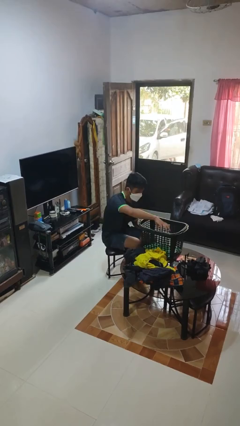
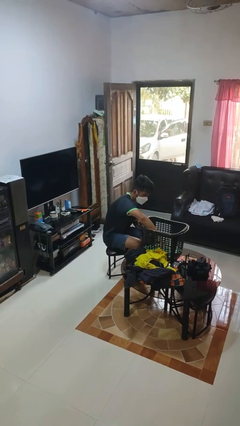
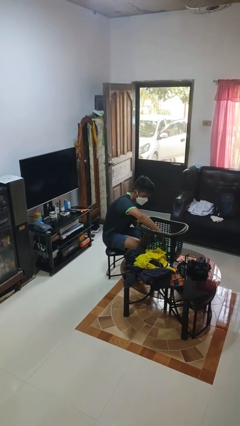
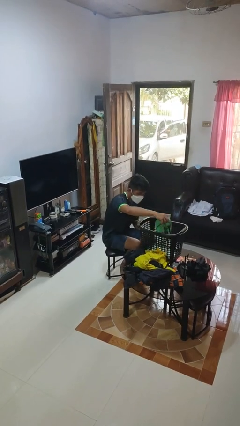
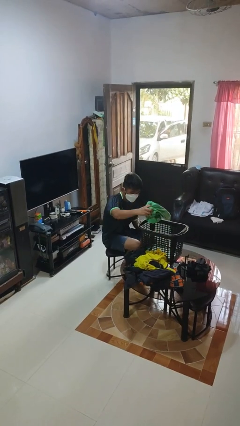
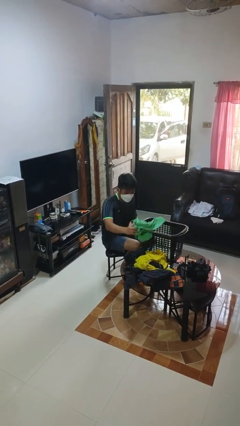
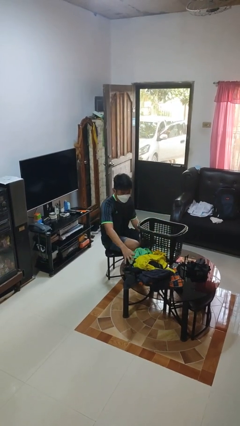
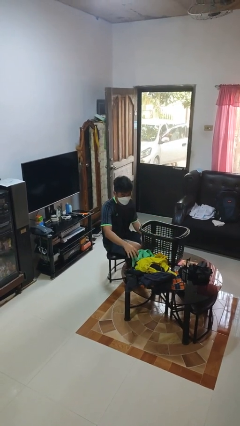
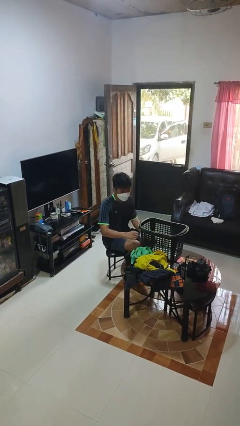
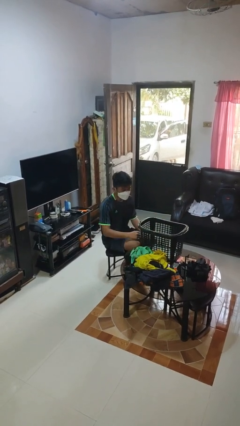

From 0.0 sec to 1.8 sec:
person takes object from basket

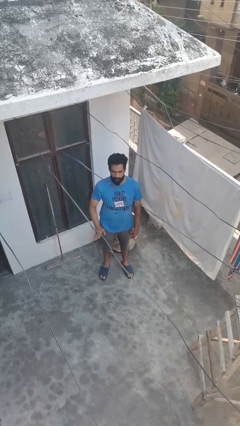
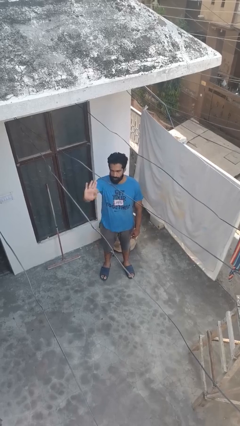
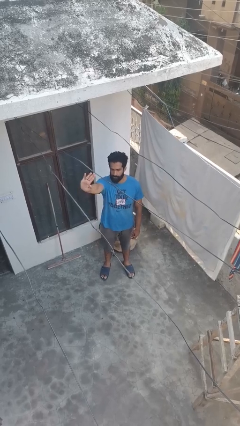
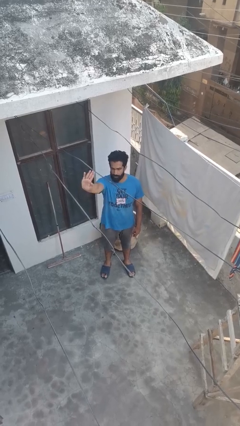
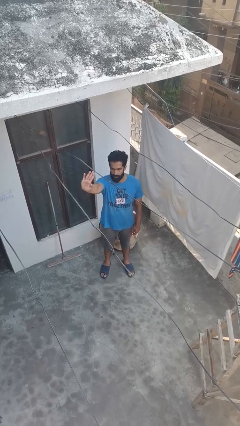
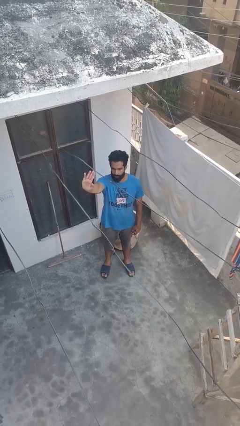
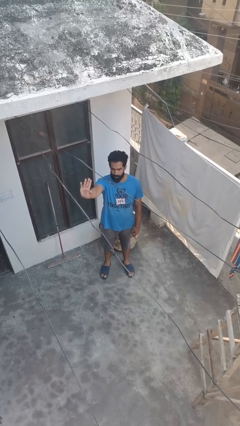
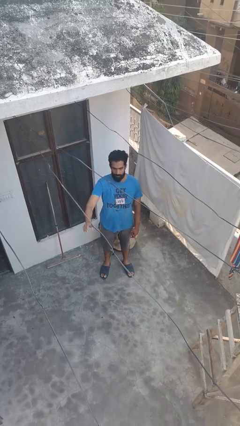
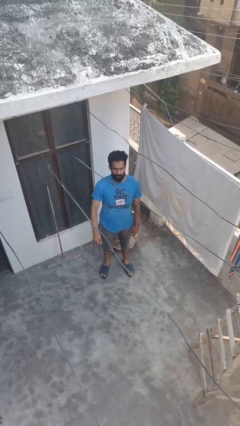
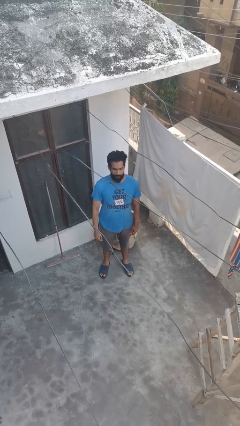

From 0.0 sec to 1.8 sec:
person gestures stop

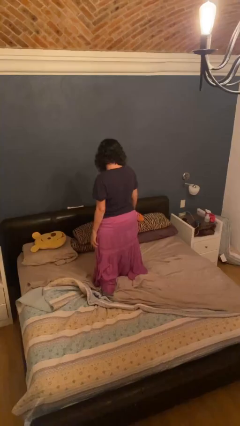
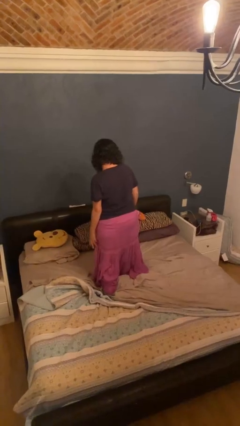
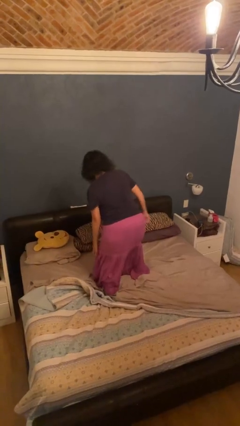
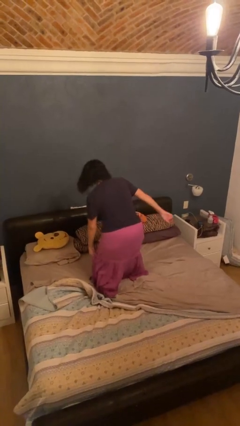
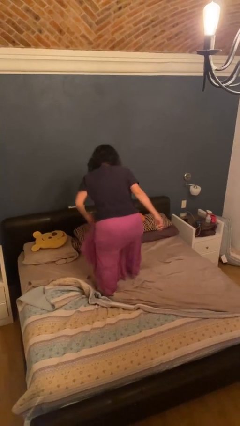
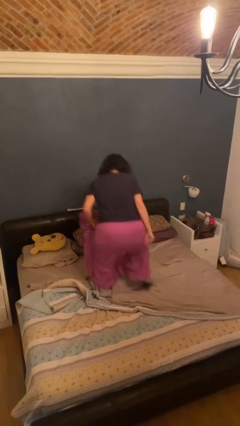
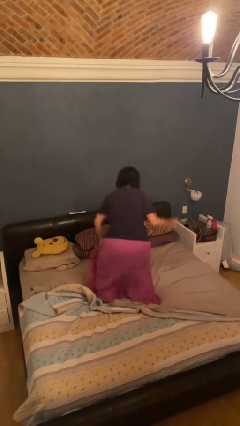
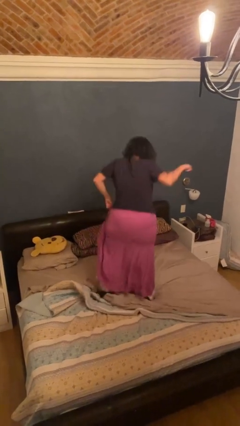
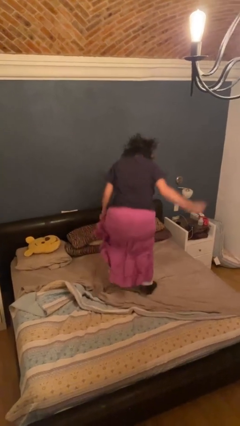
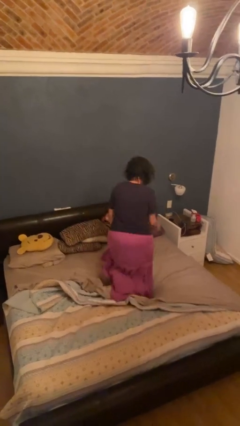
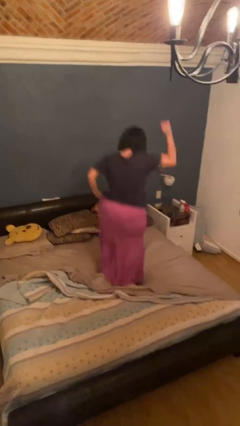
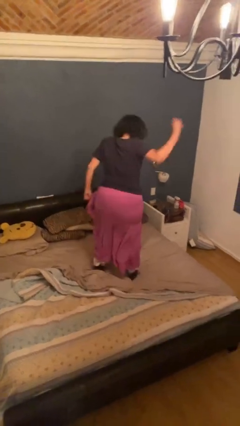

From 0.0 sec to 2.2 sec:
person jumps on bed

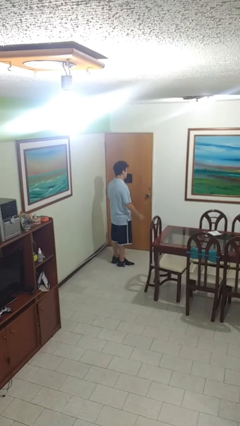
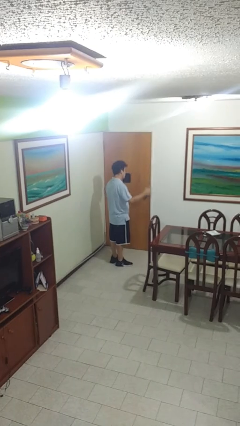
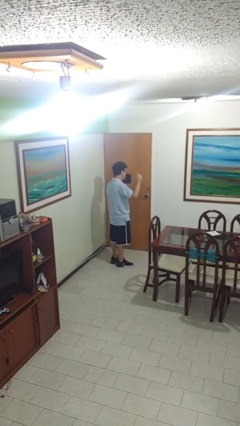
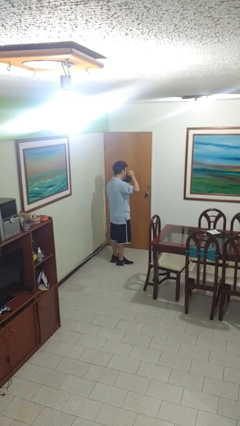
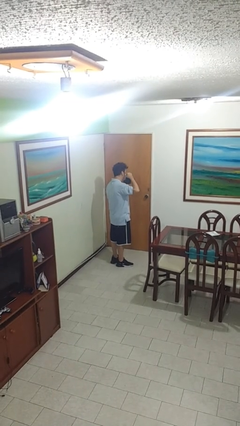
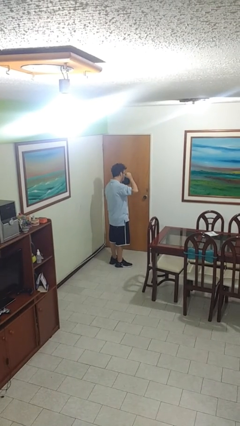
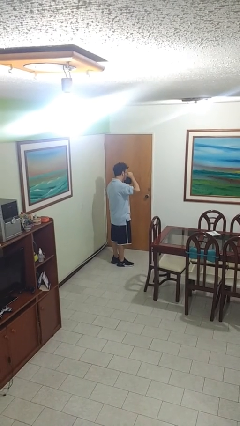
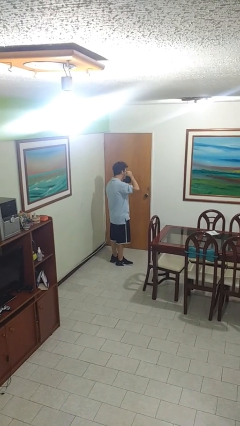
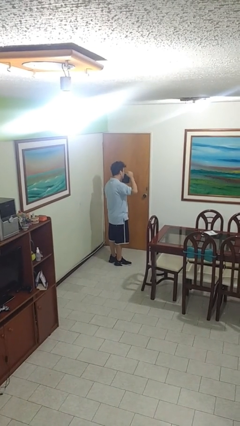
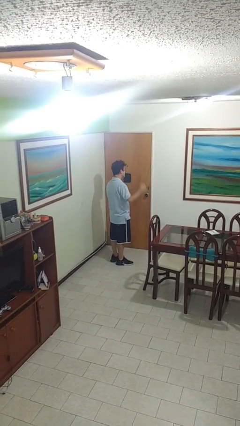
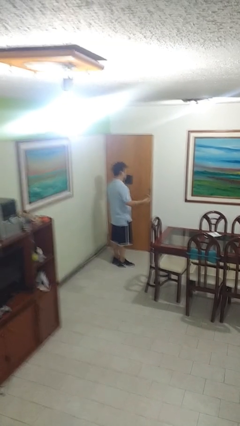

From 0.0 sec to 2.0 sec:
person gestures listen closely

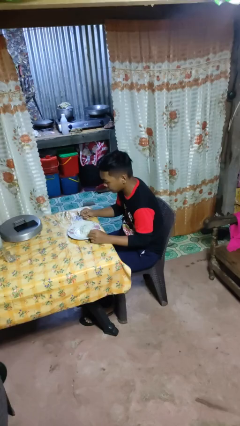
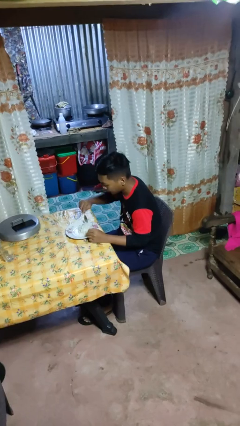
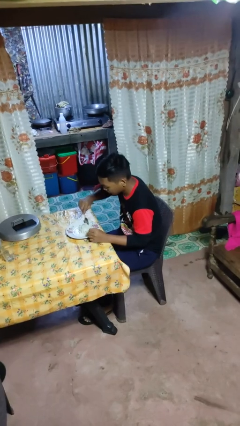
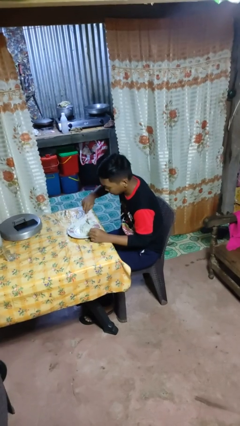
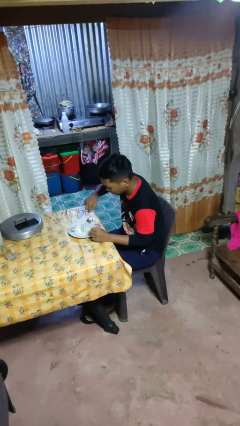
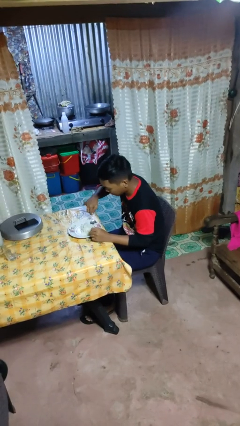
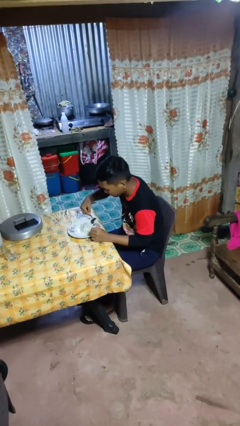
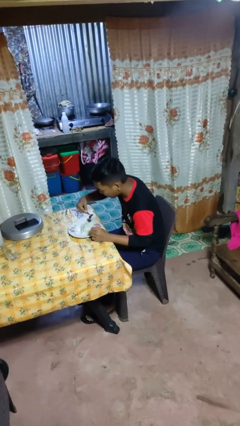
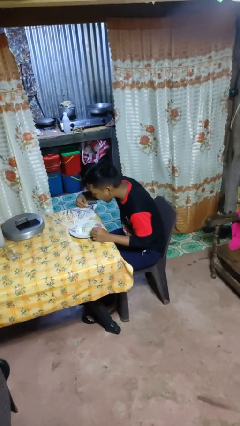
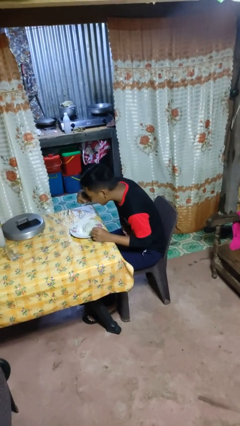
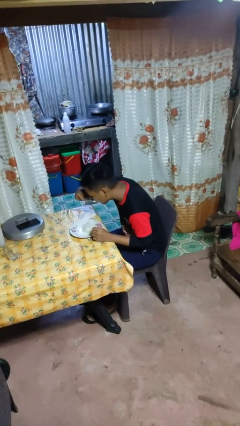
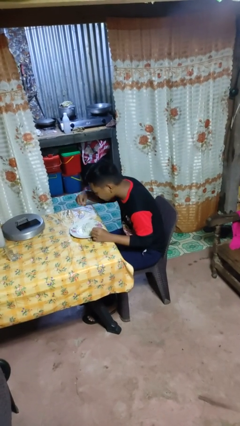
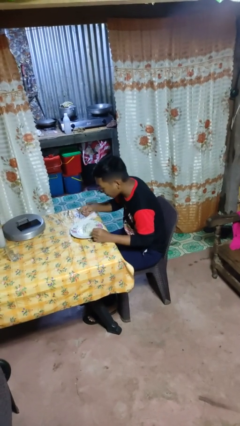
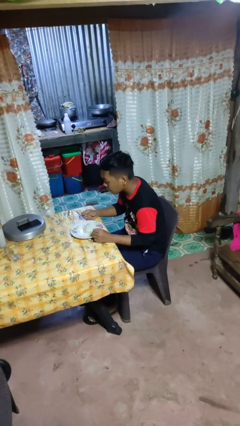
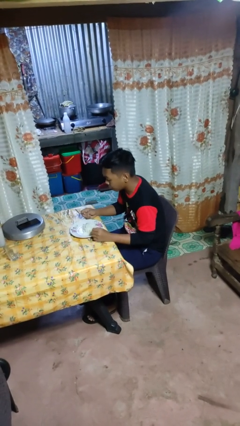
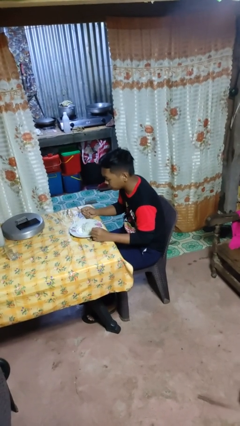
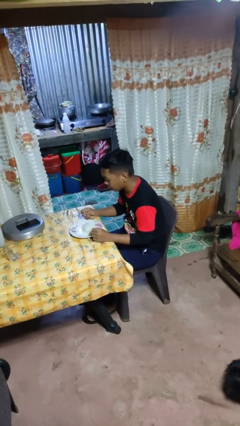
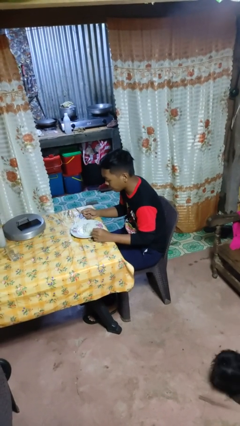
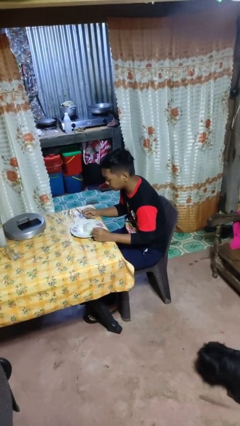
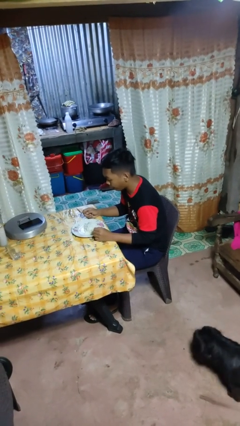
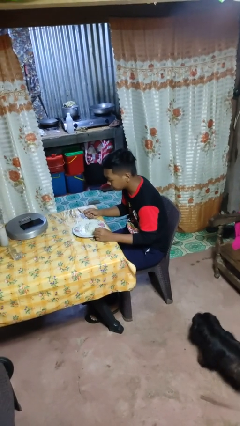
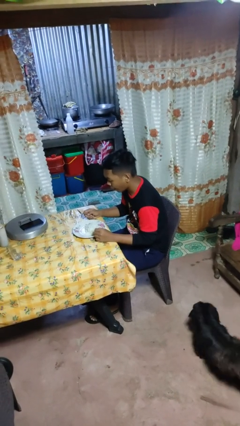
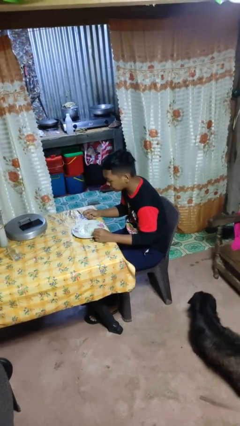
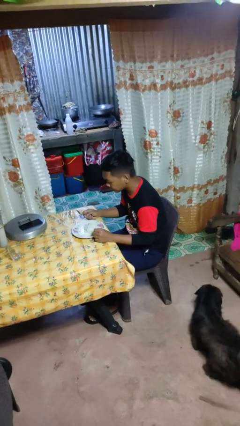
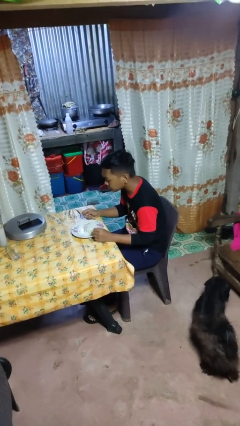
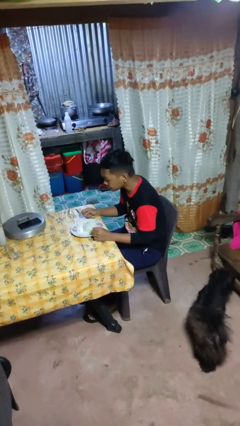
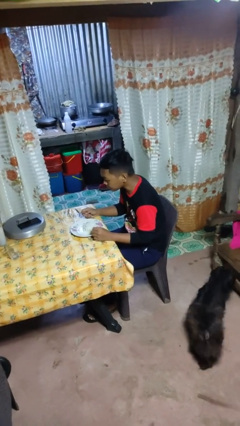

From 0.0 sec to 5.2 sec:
person eats with utensil

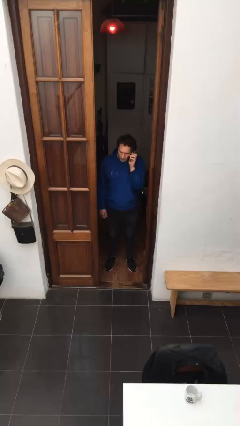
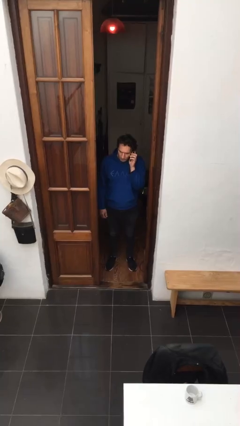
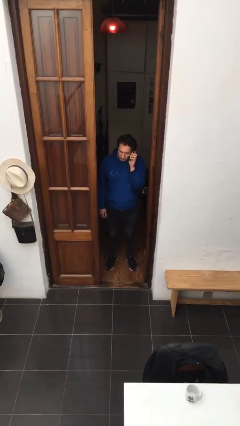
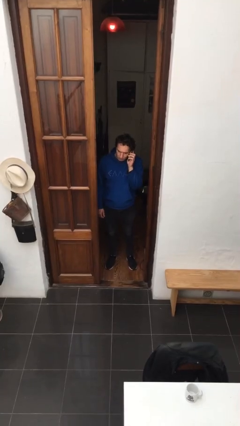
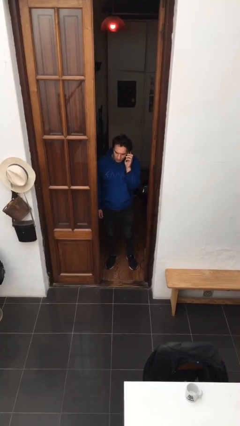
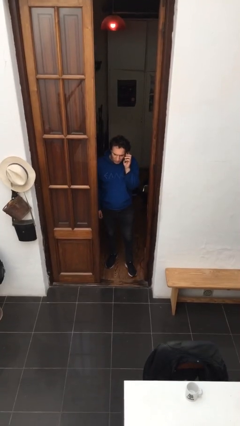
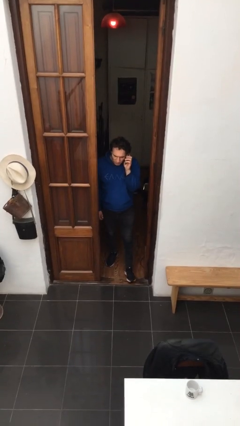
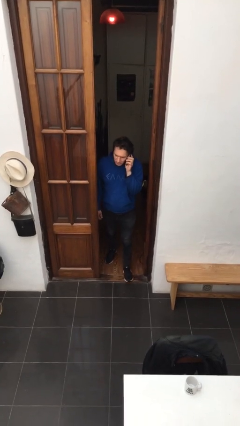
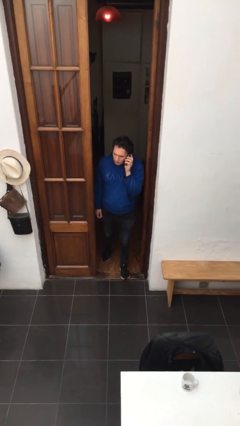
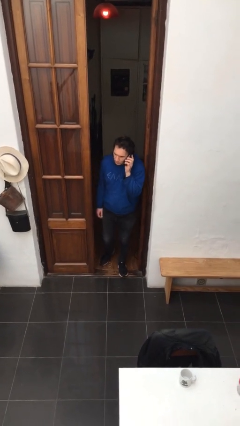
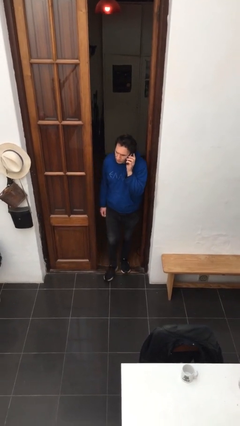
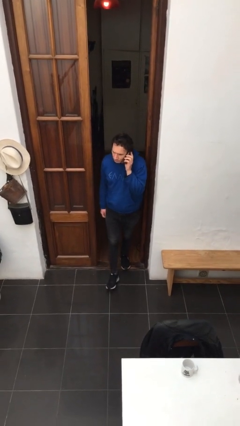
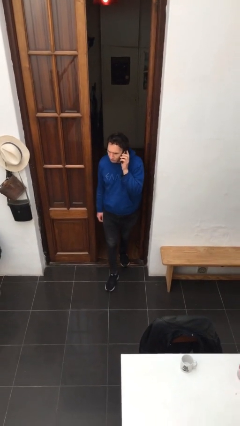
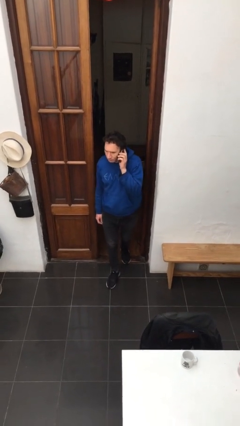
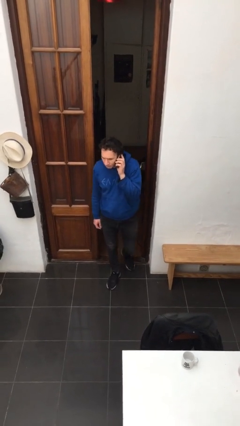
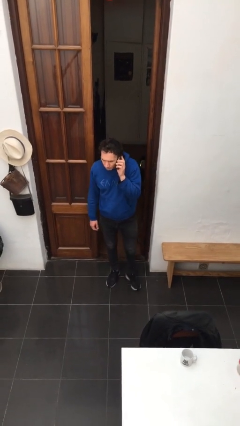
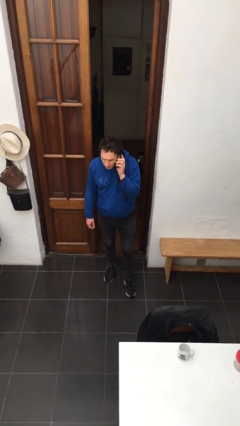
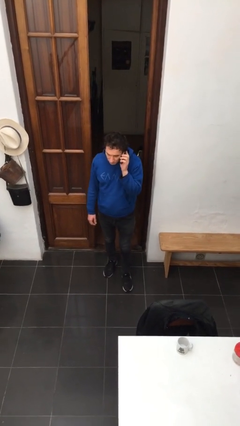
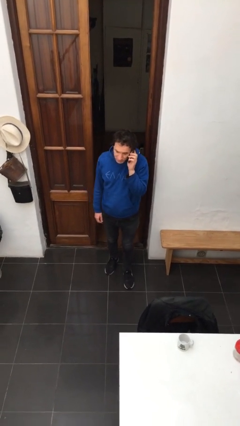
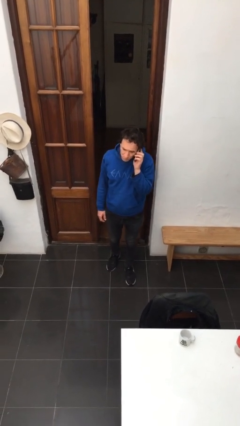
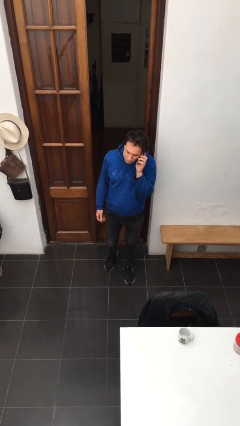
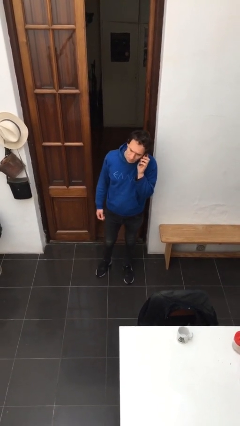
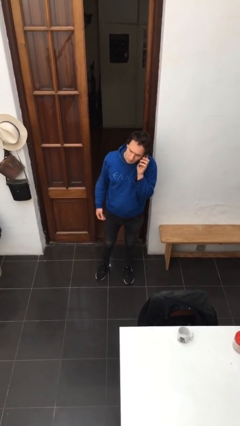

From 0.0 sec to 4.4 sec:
person enters scene through structure
